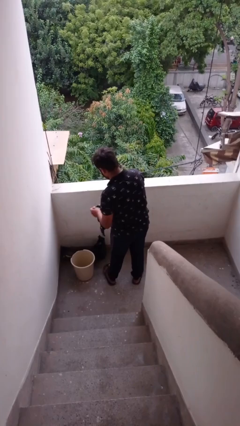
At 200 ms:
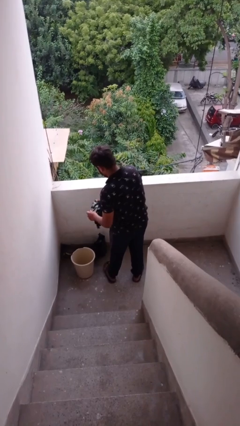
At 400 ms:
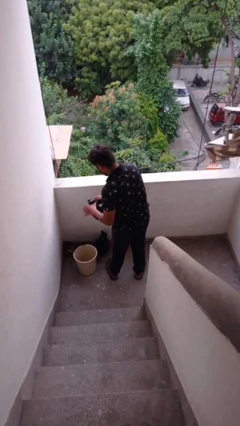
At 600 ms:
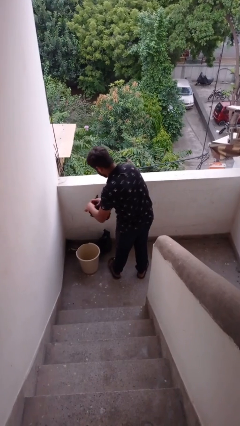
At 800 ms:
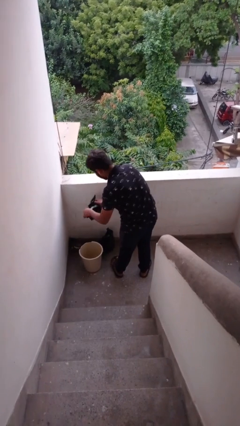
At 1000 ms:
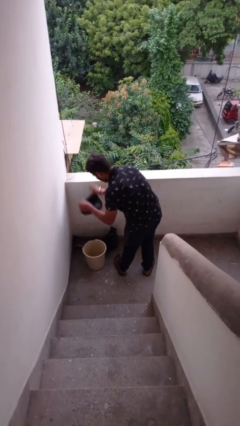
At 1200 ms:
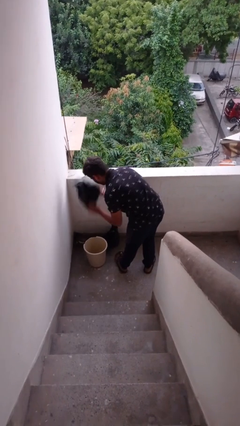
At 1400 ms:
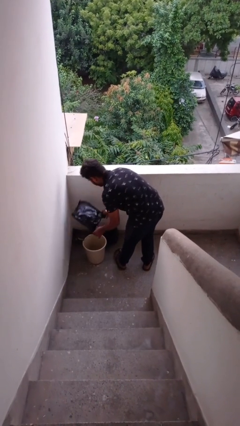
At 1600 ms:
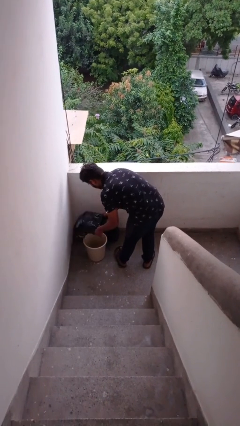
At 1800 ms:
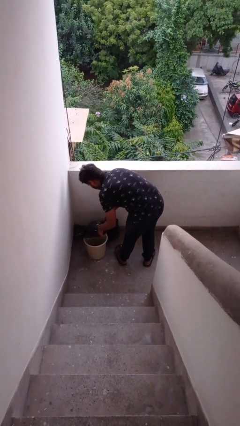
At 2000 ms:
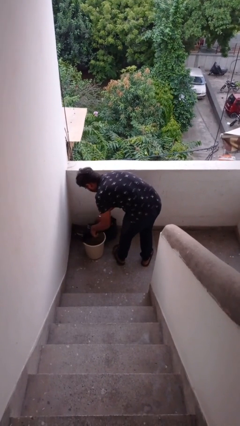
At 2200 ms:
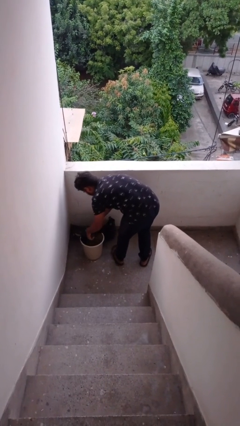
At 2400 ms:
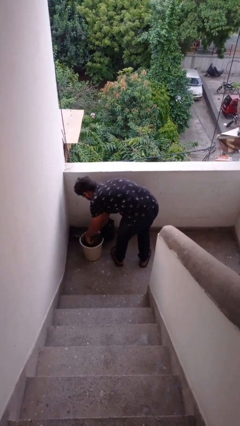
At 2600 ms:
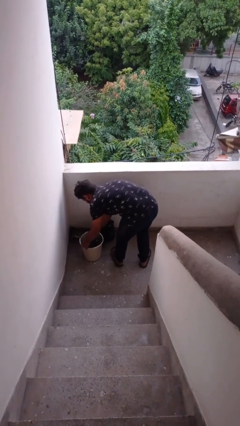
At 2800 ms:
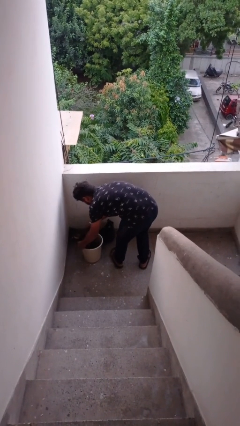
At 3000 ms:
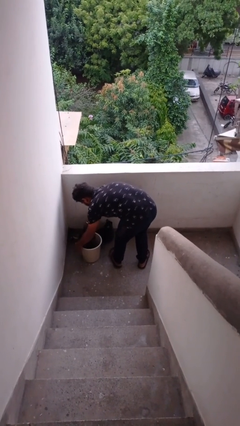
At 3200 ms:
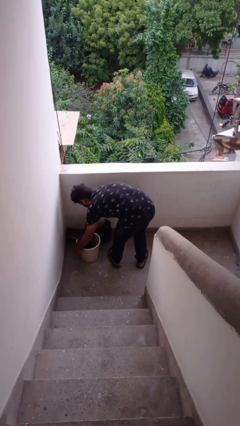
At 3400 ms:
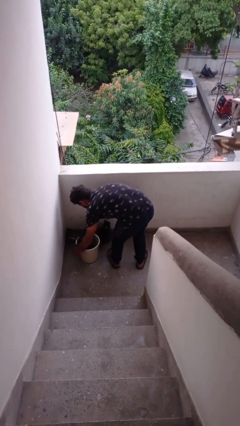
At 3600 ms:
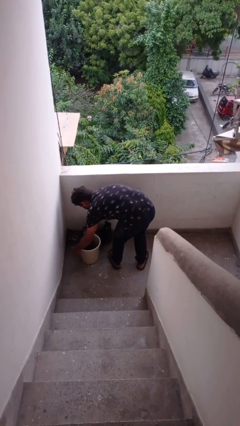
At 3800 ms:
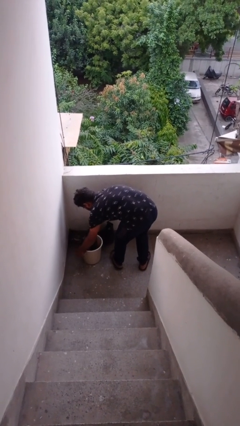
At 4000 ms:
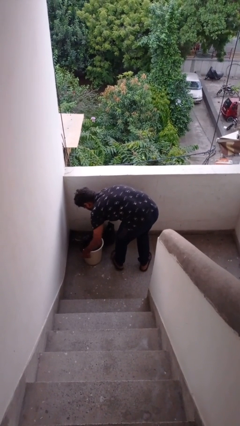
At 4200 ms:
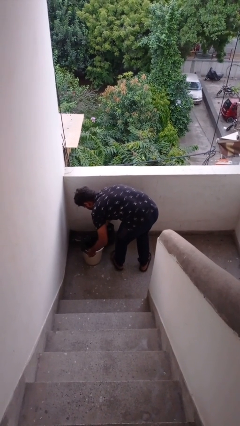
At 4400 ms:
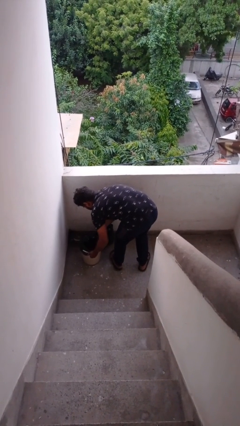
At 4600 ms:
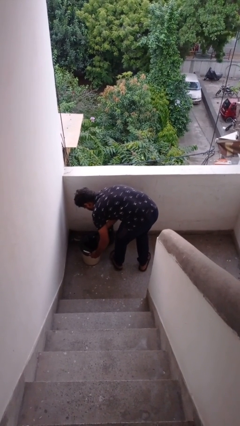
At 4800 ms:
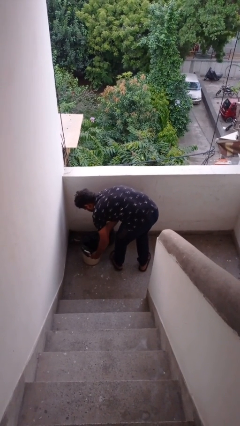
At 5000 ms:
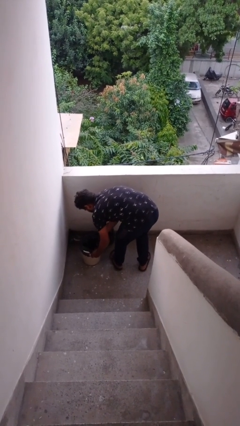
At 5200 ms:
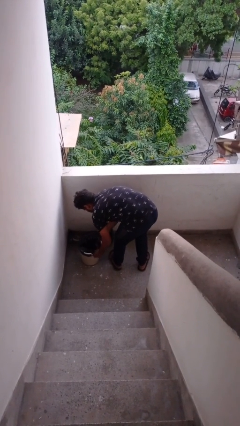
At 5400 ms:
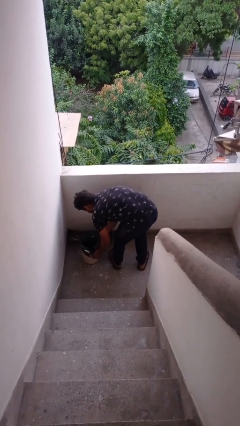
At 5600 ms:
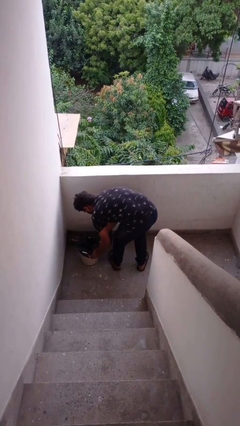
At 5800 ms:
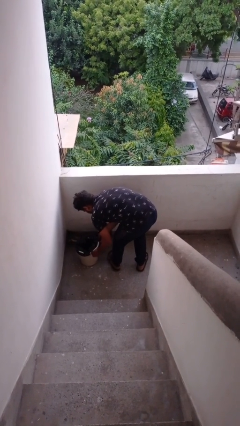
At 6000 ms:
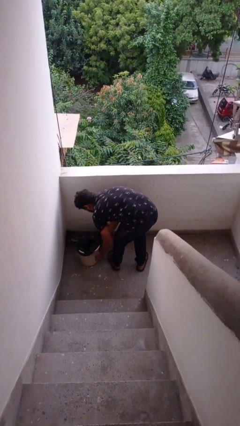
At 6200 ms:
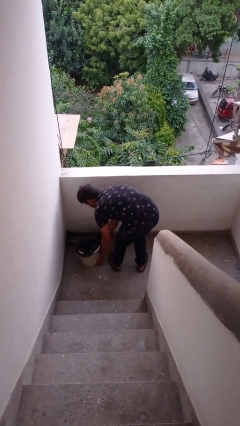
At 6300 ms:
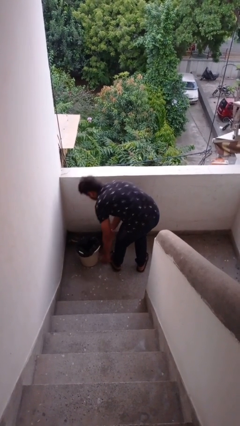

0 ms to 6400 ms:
person inserts trashbag into trashcan

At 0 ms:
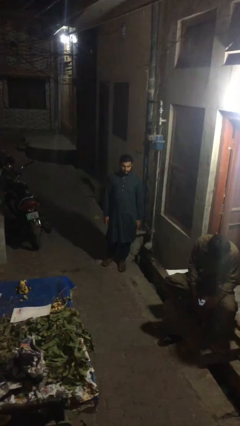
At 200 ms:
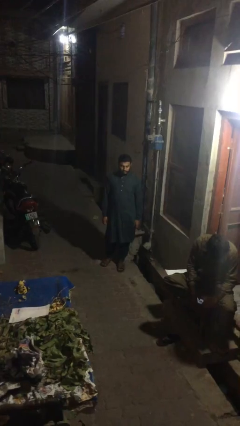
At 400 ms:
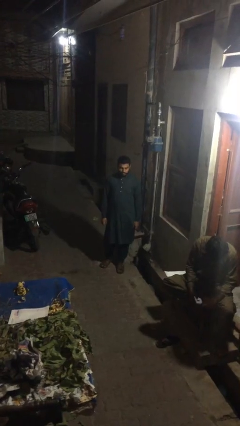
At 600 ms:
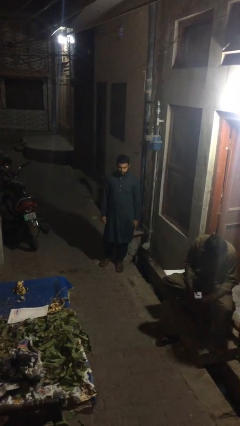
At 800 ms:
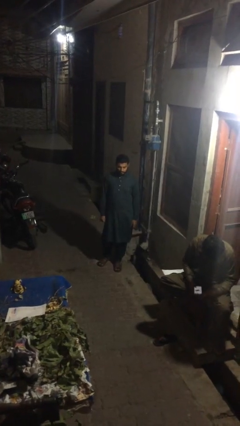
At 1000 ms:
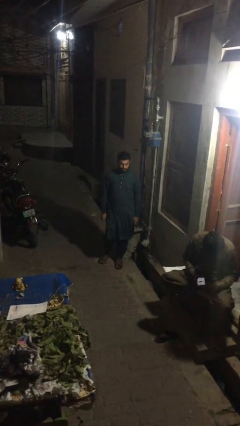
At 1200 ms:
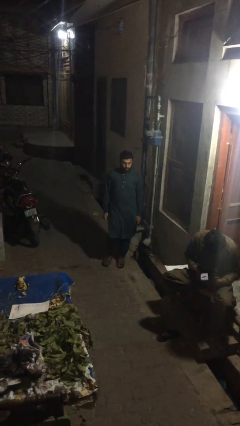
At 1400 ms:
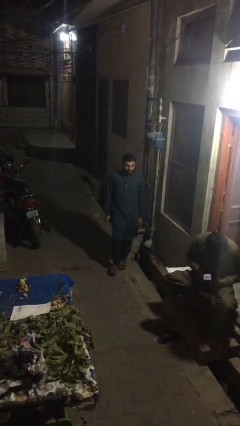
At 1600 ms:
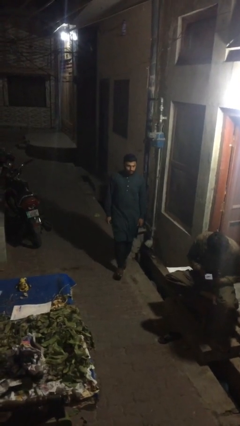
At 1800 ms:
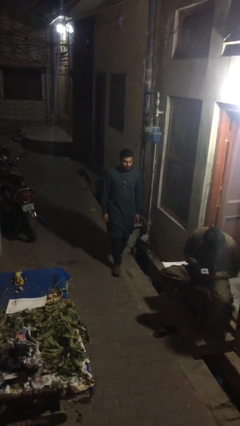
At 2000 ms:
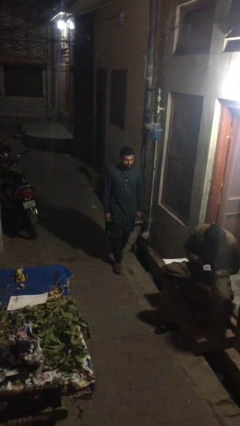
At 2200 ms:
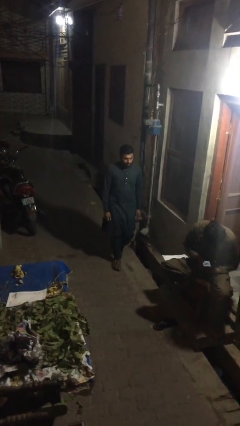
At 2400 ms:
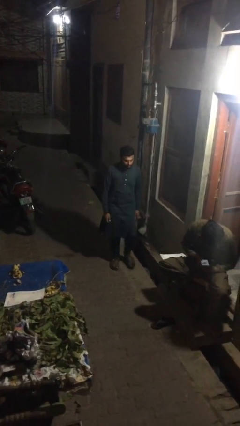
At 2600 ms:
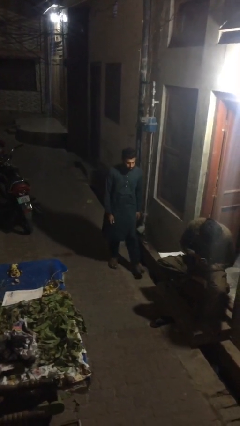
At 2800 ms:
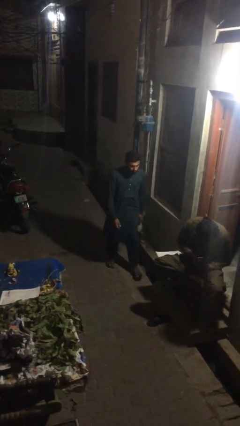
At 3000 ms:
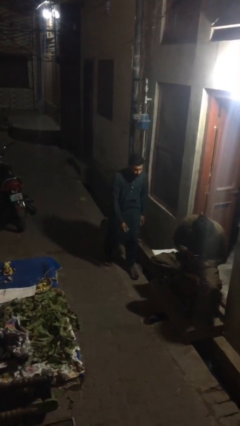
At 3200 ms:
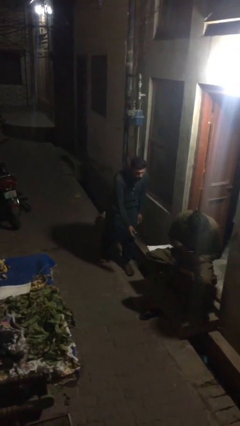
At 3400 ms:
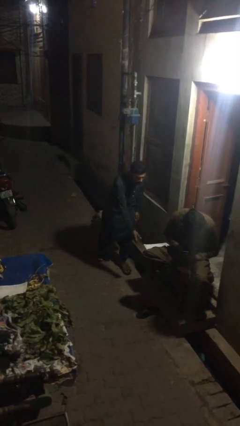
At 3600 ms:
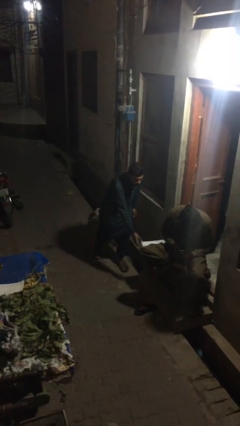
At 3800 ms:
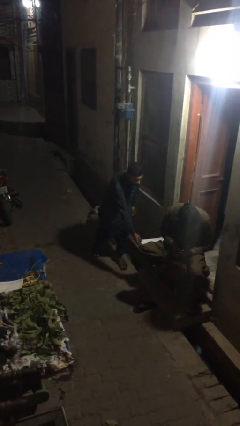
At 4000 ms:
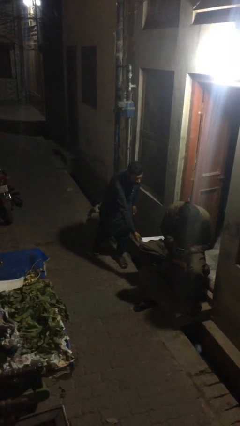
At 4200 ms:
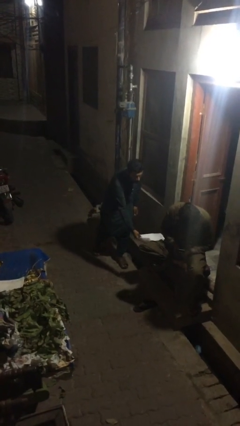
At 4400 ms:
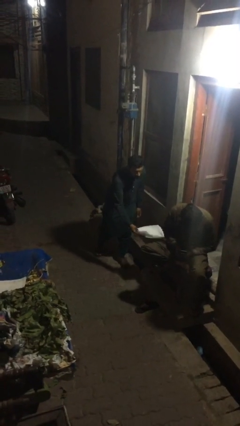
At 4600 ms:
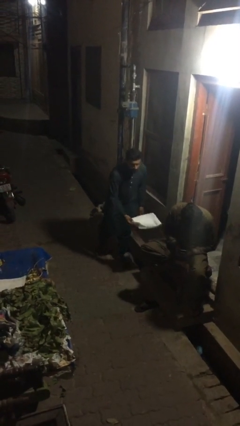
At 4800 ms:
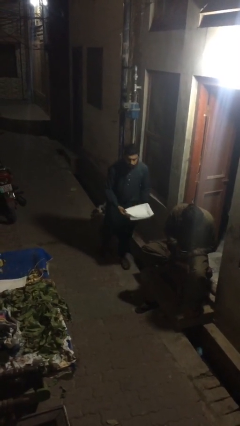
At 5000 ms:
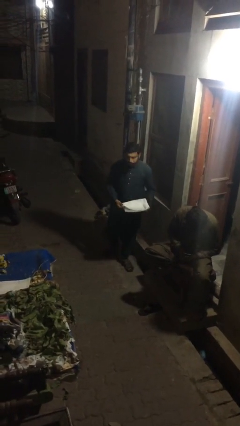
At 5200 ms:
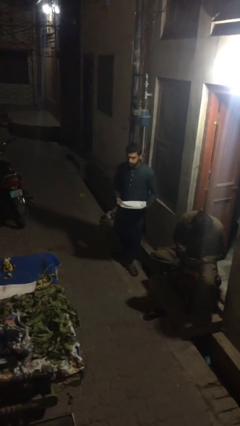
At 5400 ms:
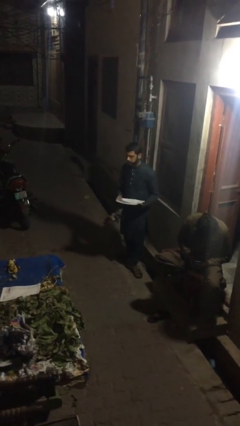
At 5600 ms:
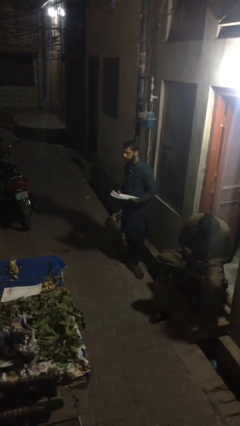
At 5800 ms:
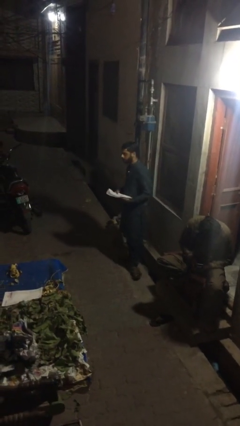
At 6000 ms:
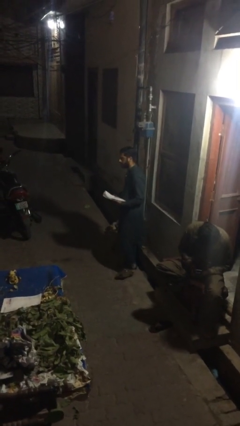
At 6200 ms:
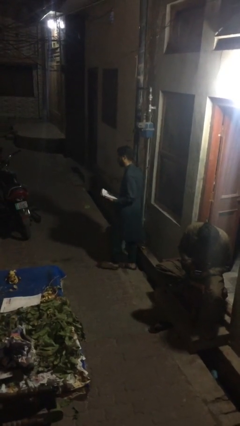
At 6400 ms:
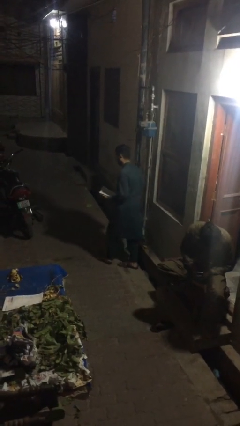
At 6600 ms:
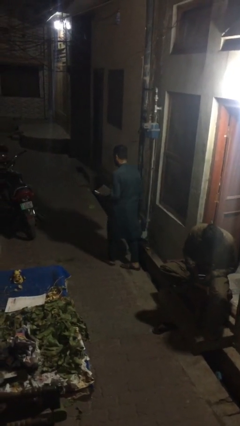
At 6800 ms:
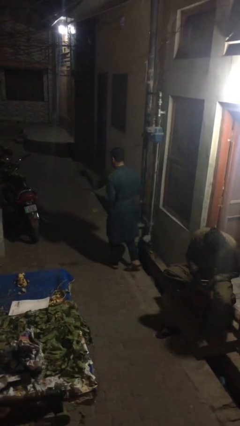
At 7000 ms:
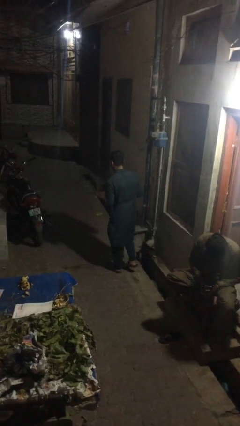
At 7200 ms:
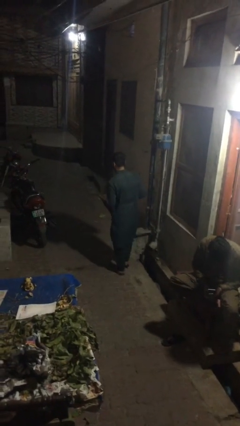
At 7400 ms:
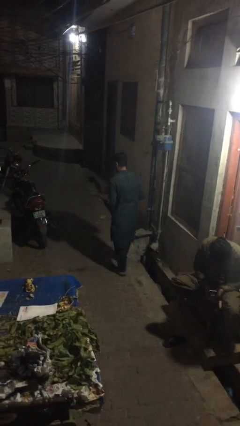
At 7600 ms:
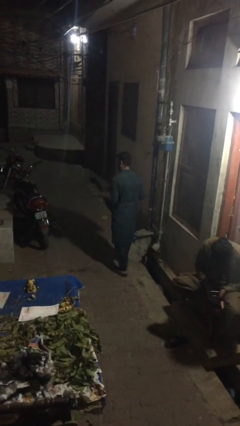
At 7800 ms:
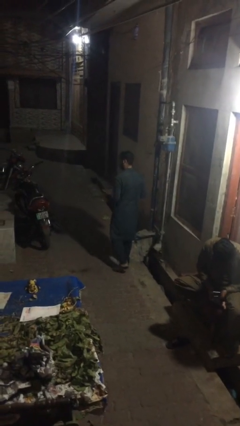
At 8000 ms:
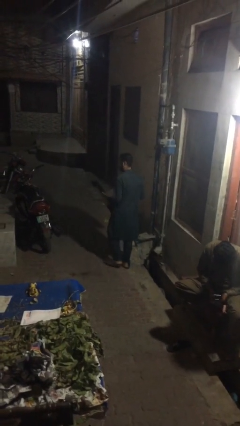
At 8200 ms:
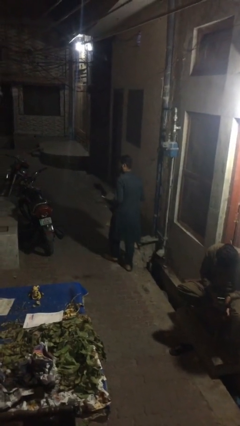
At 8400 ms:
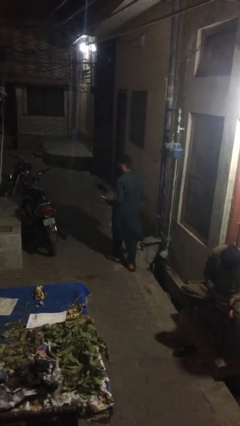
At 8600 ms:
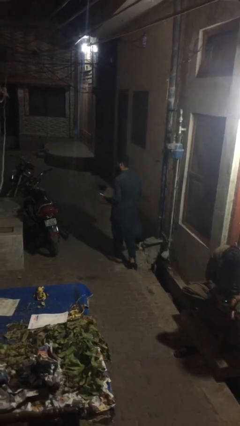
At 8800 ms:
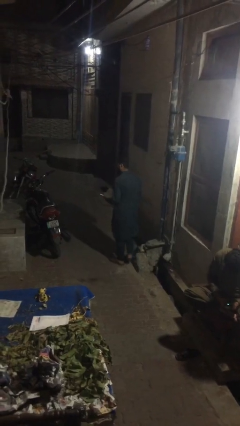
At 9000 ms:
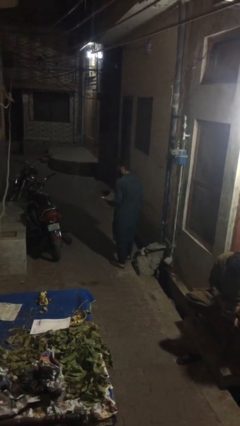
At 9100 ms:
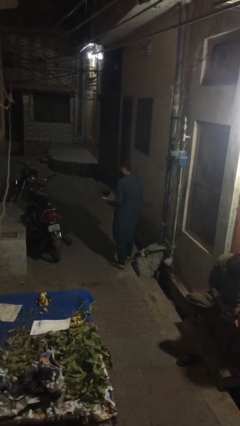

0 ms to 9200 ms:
person steals object from person

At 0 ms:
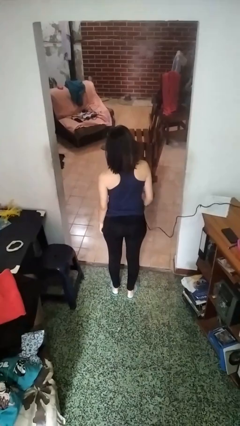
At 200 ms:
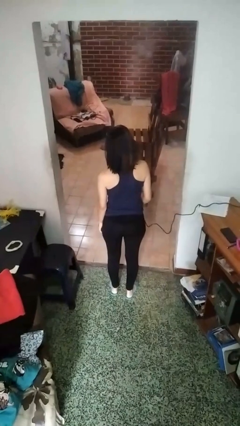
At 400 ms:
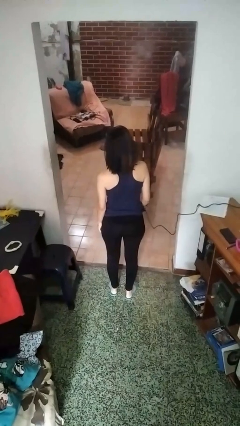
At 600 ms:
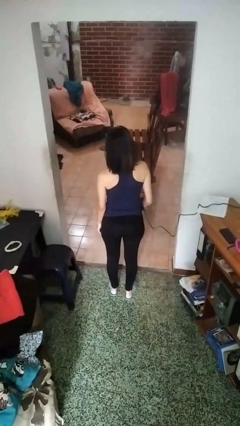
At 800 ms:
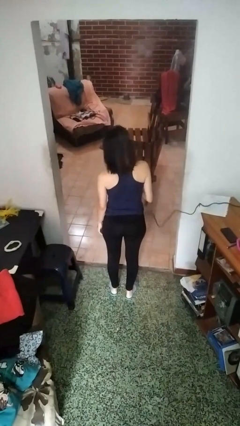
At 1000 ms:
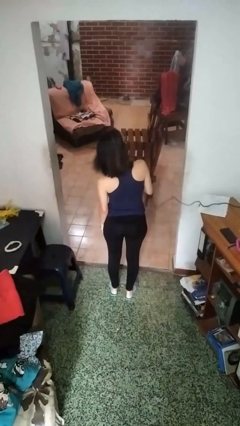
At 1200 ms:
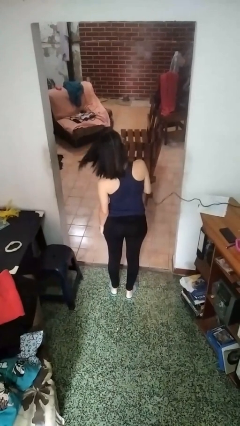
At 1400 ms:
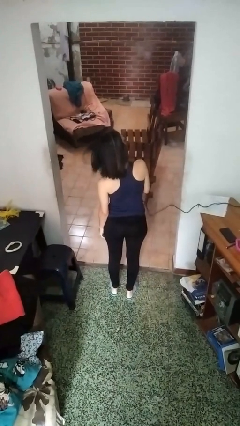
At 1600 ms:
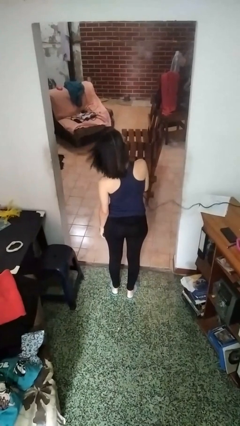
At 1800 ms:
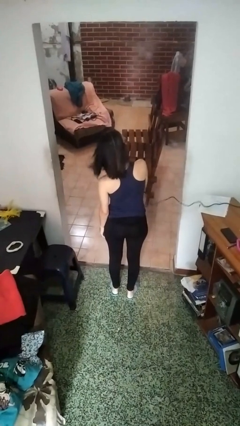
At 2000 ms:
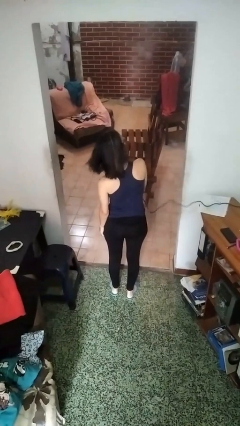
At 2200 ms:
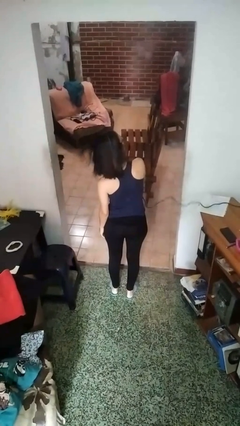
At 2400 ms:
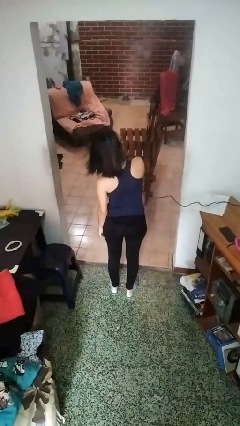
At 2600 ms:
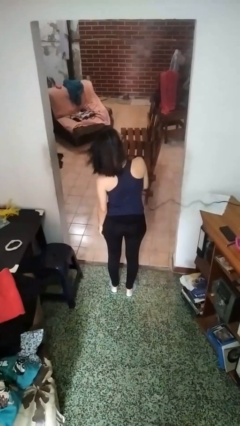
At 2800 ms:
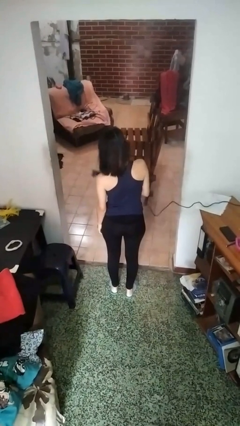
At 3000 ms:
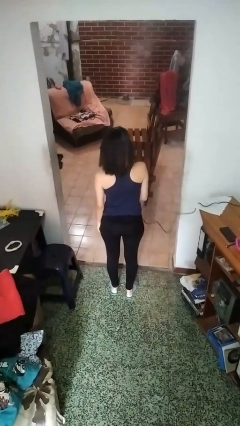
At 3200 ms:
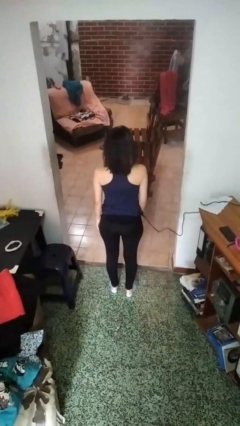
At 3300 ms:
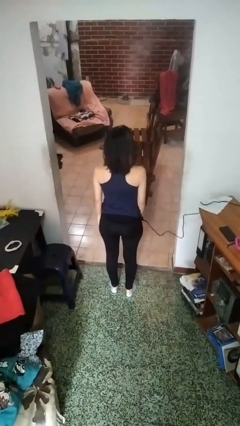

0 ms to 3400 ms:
person dries hair with hairdryer
